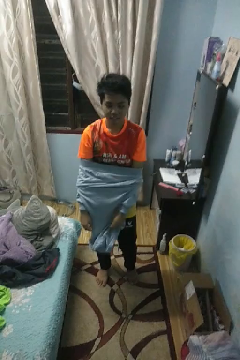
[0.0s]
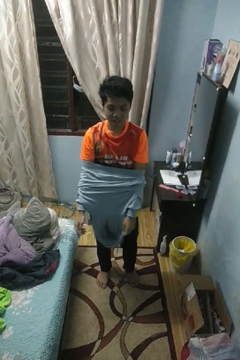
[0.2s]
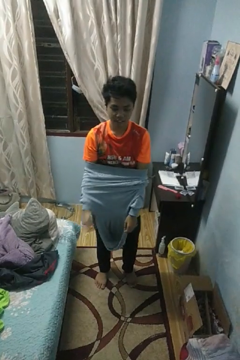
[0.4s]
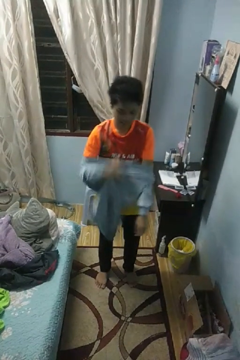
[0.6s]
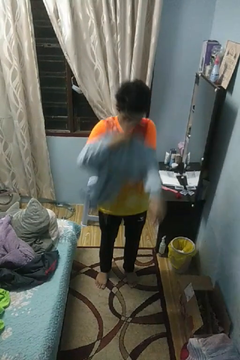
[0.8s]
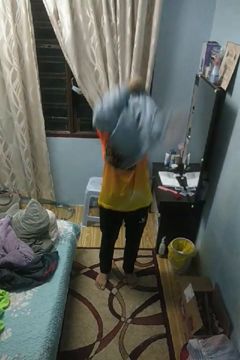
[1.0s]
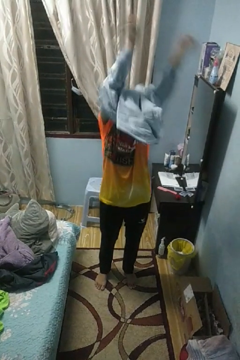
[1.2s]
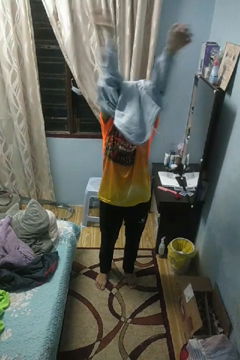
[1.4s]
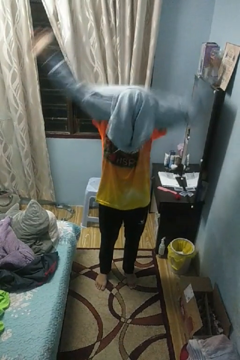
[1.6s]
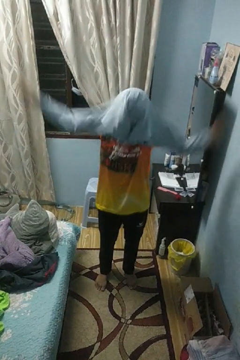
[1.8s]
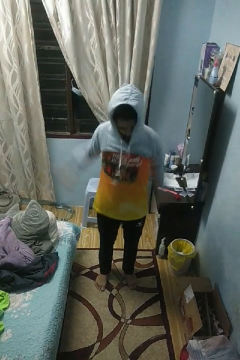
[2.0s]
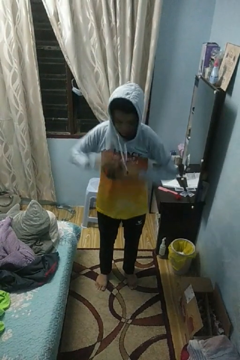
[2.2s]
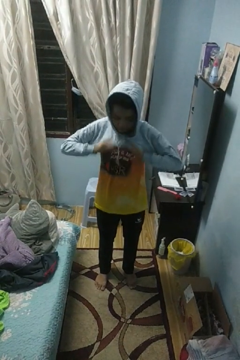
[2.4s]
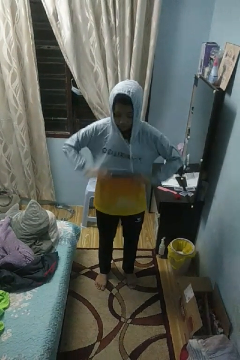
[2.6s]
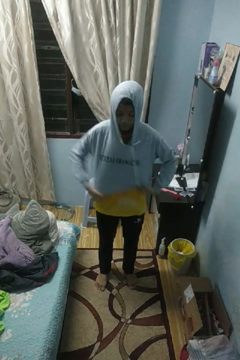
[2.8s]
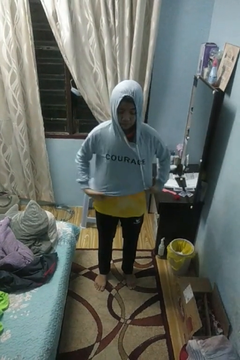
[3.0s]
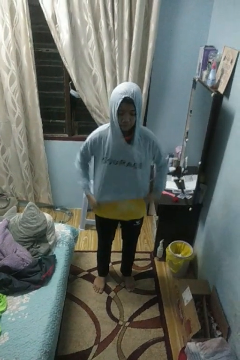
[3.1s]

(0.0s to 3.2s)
person puts on hoodie

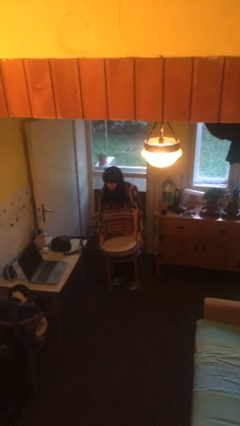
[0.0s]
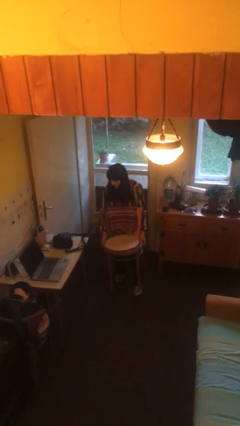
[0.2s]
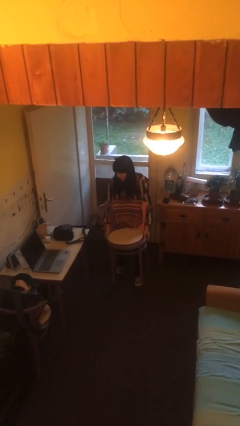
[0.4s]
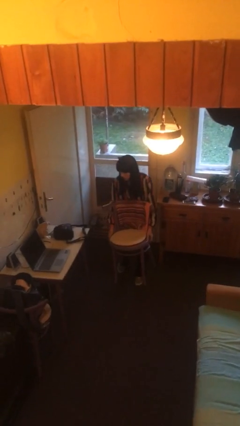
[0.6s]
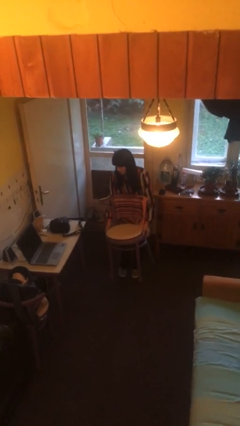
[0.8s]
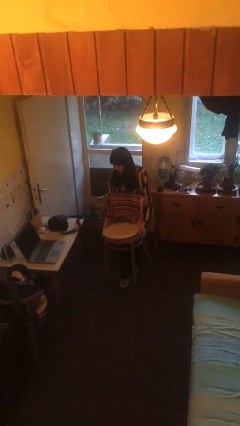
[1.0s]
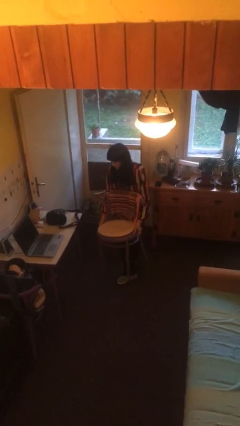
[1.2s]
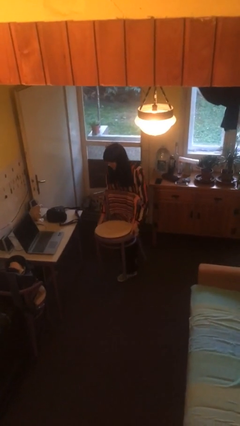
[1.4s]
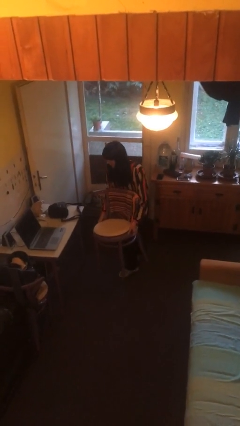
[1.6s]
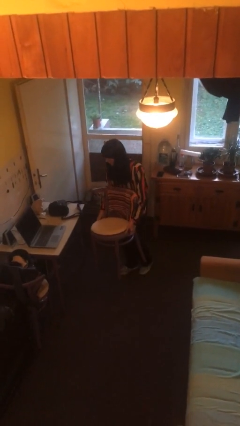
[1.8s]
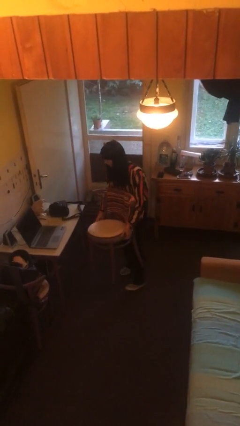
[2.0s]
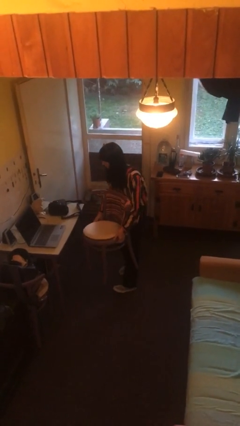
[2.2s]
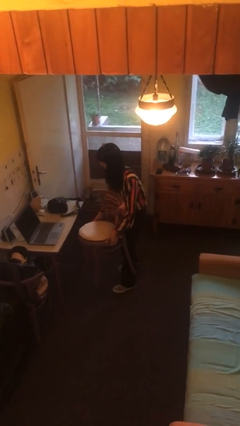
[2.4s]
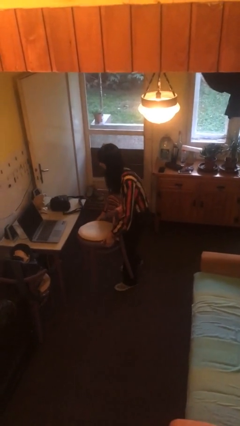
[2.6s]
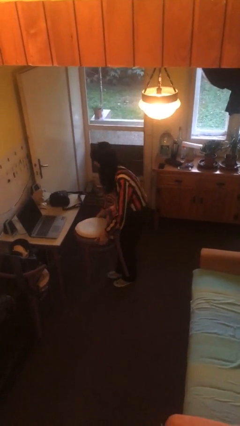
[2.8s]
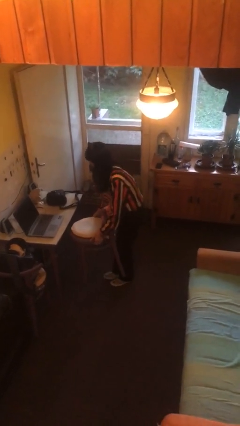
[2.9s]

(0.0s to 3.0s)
person carries heavy object

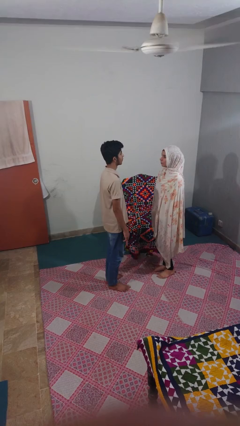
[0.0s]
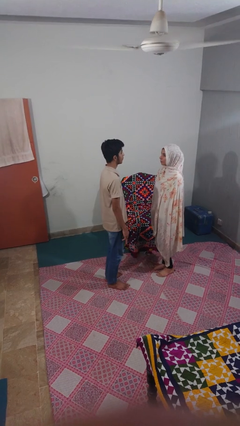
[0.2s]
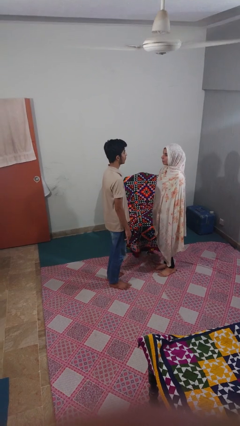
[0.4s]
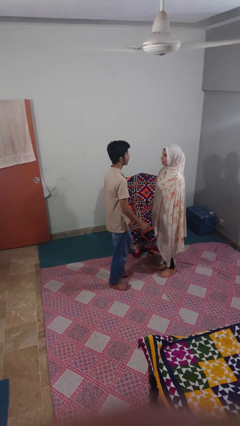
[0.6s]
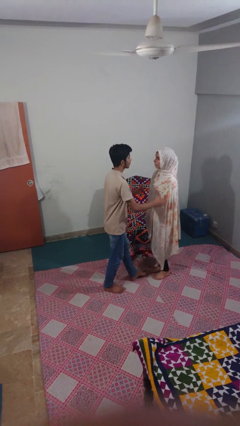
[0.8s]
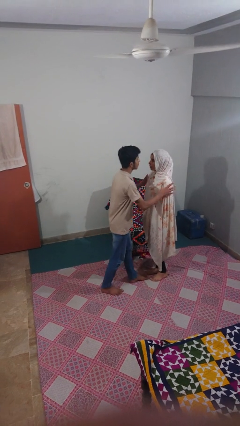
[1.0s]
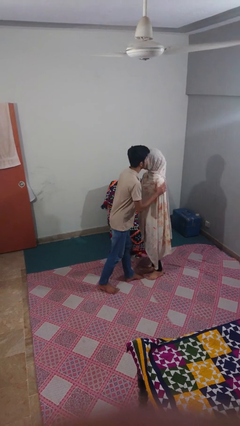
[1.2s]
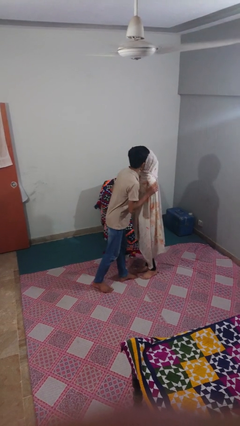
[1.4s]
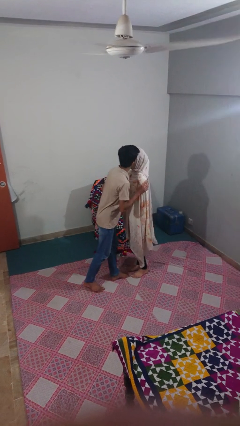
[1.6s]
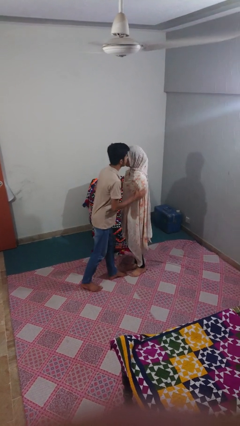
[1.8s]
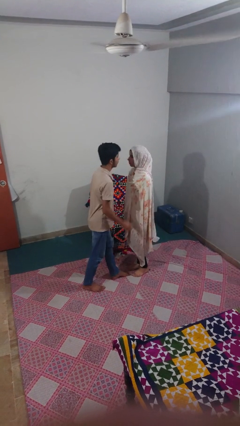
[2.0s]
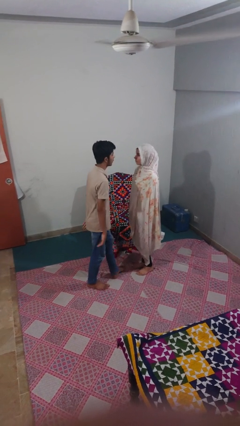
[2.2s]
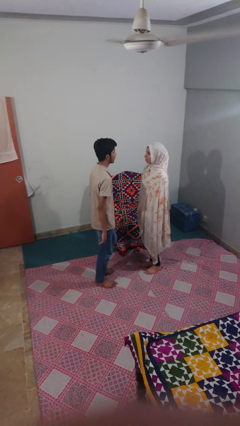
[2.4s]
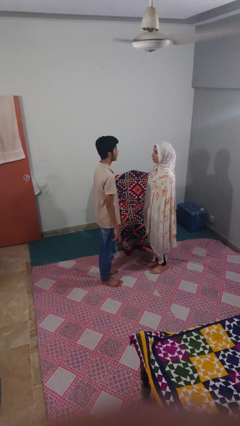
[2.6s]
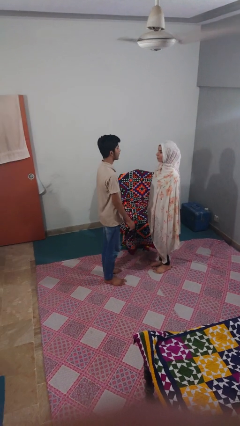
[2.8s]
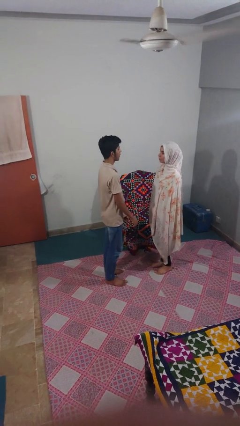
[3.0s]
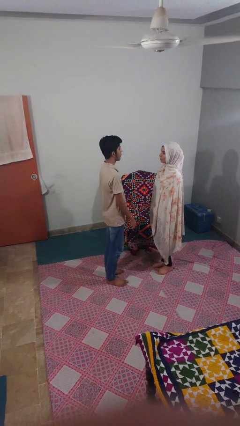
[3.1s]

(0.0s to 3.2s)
person kisses cheek of person

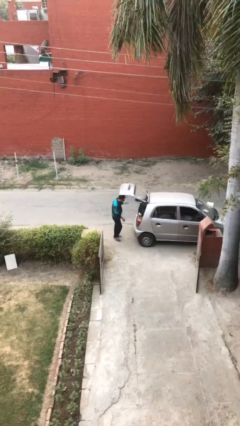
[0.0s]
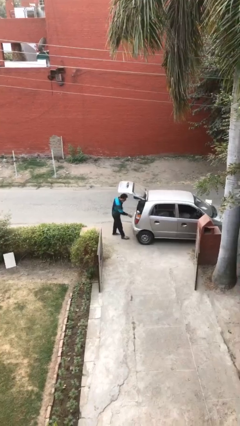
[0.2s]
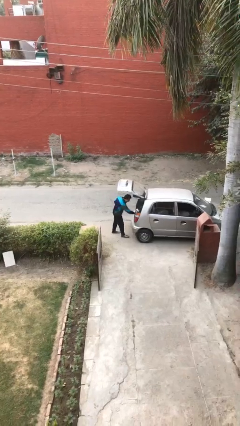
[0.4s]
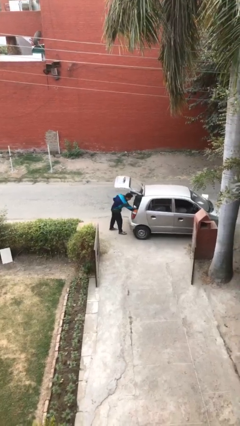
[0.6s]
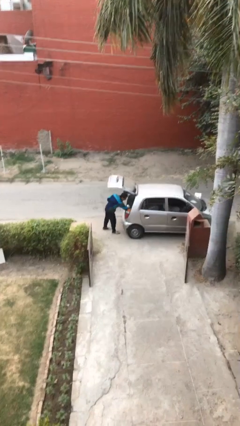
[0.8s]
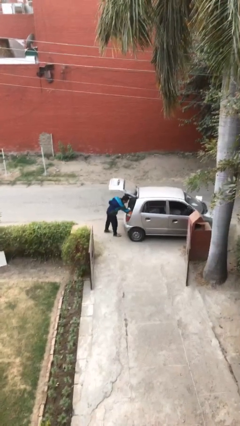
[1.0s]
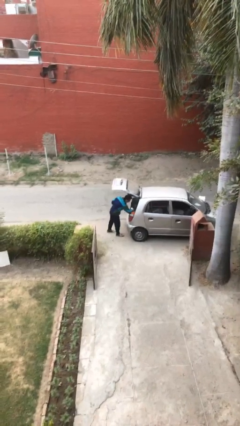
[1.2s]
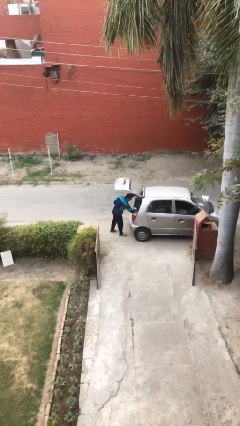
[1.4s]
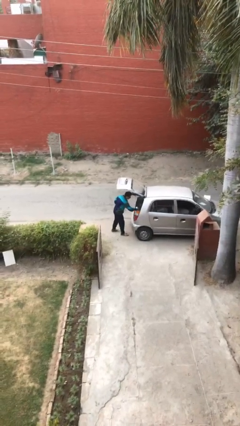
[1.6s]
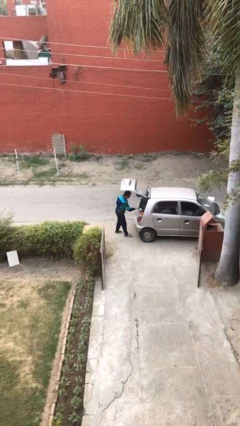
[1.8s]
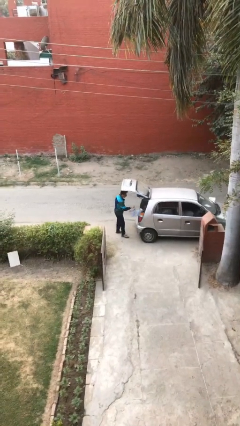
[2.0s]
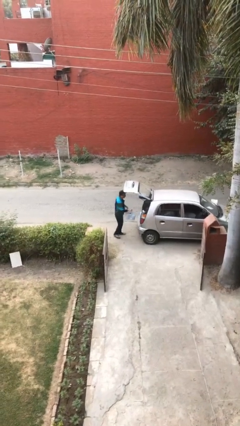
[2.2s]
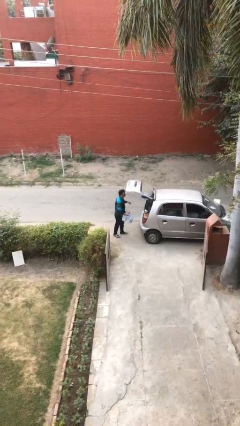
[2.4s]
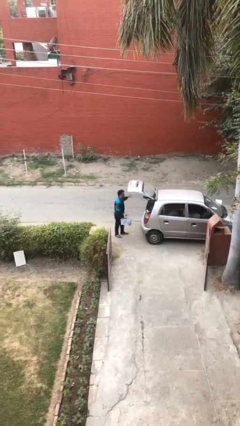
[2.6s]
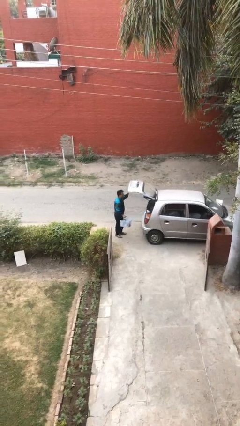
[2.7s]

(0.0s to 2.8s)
person unloads car

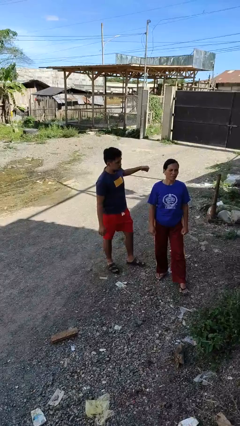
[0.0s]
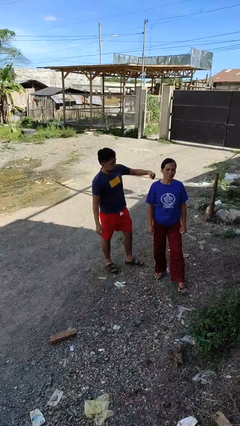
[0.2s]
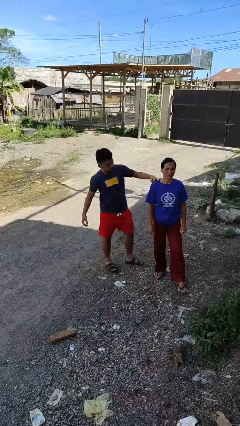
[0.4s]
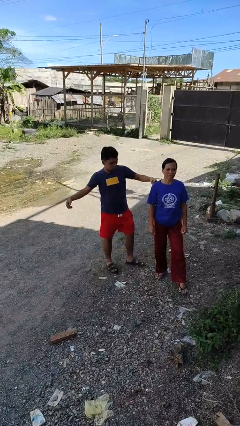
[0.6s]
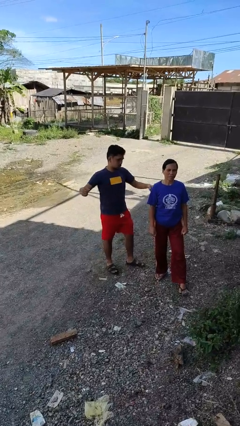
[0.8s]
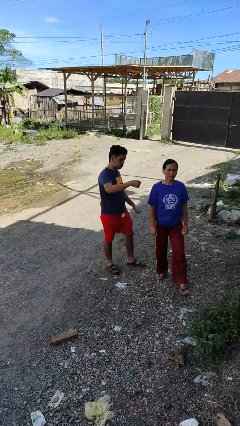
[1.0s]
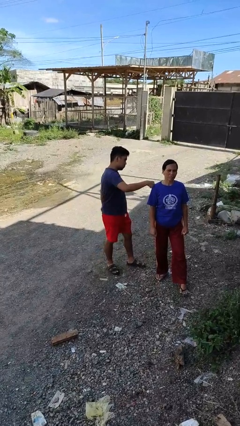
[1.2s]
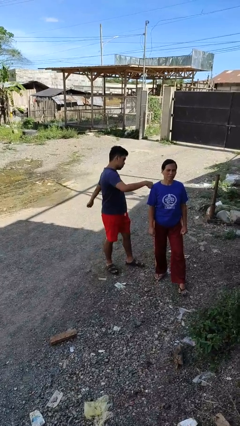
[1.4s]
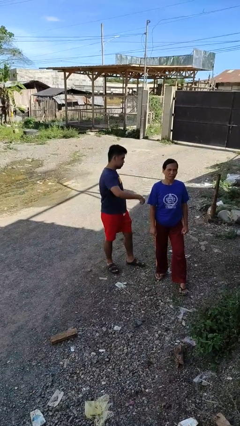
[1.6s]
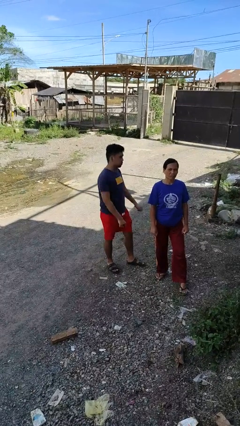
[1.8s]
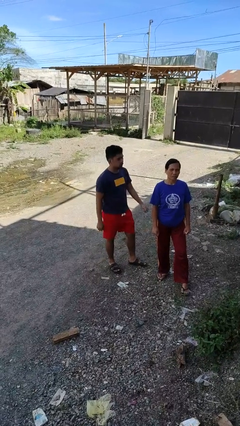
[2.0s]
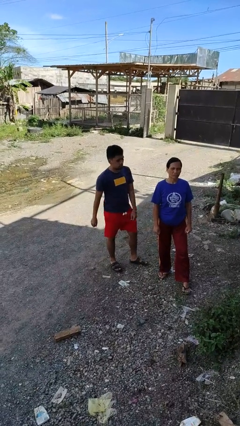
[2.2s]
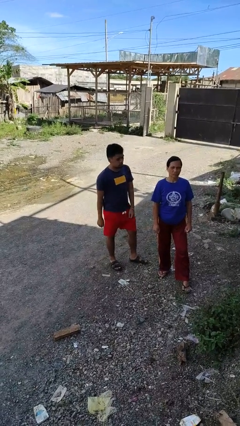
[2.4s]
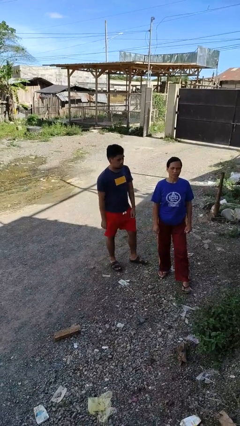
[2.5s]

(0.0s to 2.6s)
person pounds shoulders of person

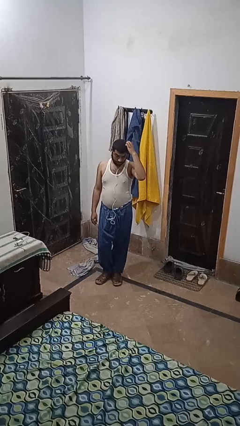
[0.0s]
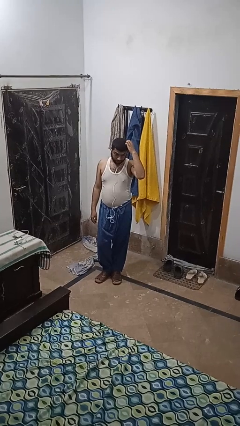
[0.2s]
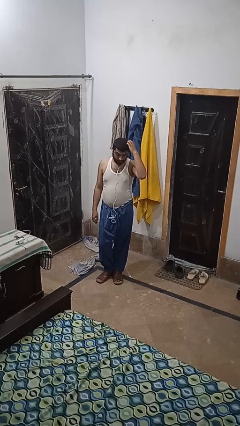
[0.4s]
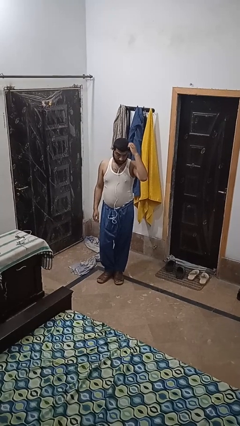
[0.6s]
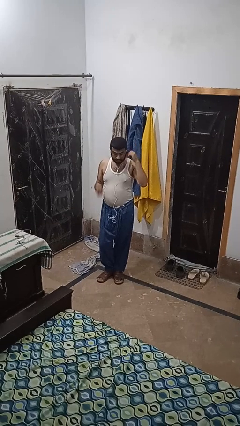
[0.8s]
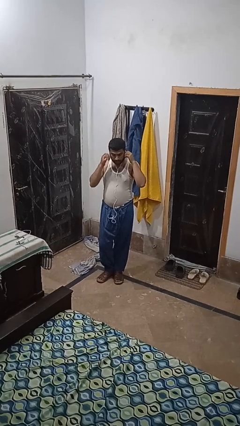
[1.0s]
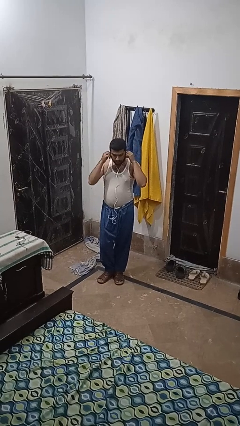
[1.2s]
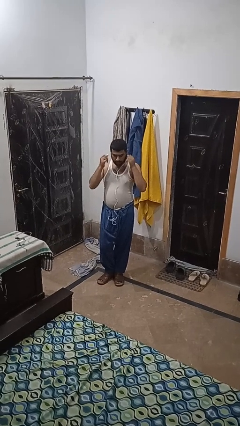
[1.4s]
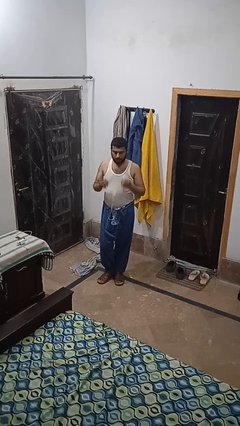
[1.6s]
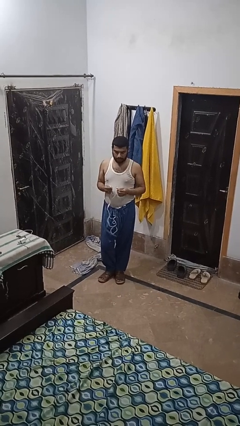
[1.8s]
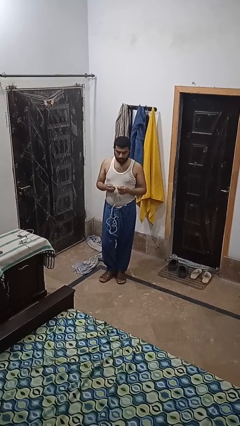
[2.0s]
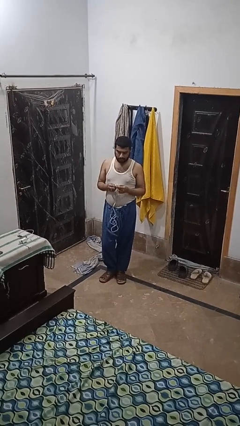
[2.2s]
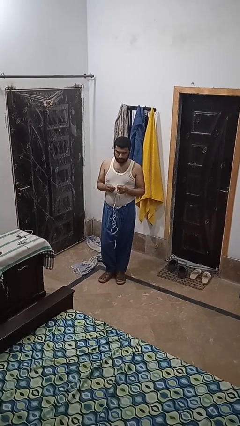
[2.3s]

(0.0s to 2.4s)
person takes off headphones

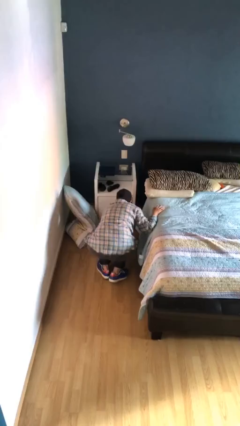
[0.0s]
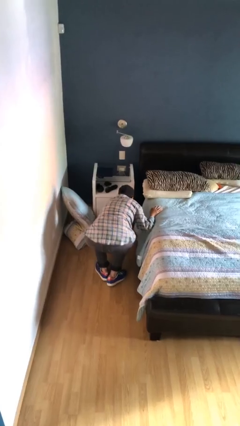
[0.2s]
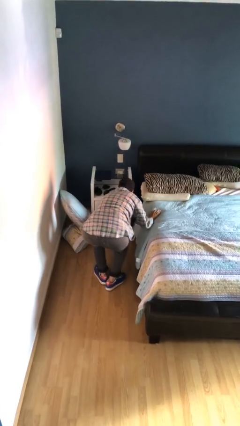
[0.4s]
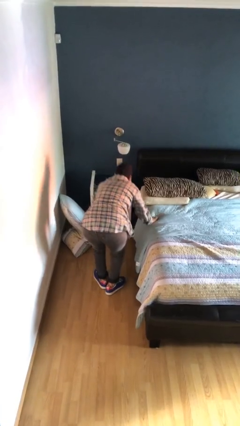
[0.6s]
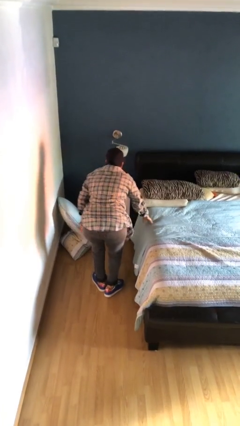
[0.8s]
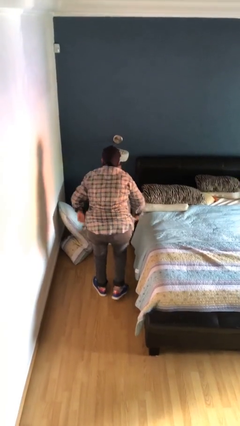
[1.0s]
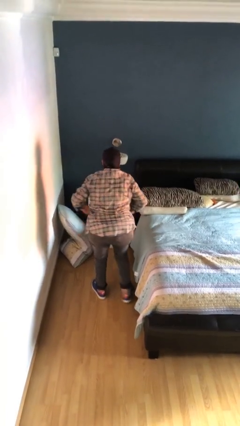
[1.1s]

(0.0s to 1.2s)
person stands up from floor
